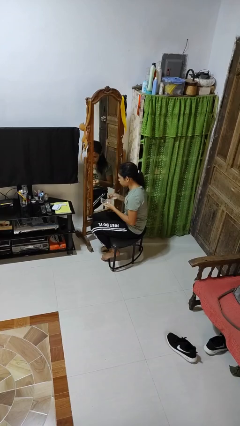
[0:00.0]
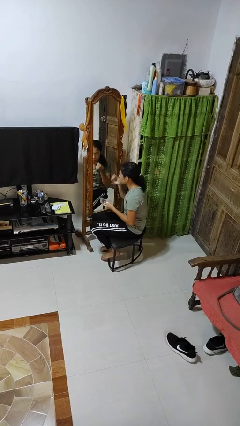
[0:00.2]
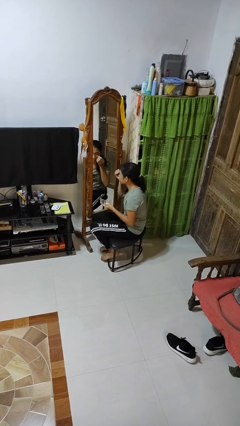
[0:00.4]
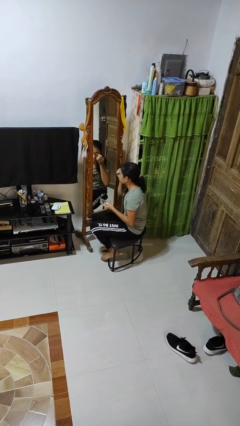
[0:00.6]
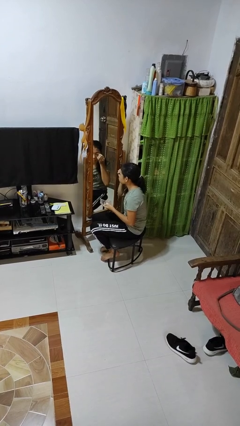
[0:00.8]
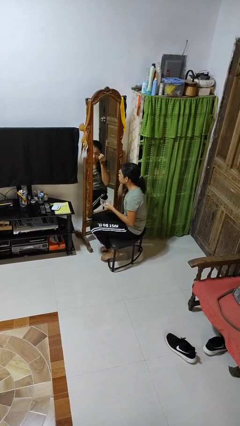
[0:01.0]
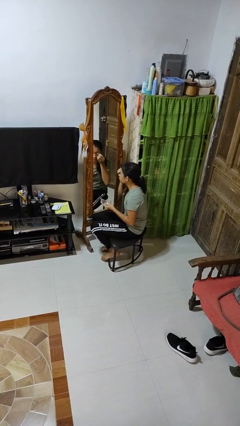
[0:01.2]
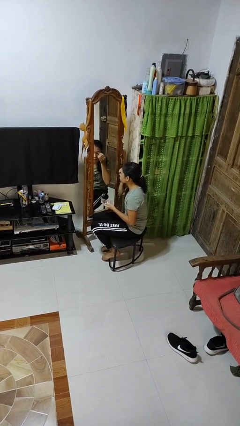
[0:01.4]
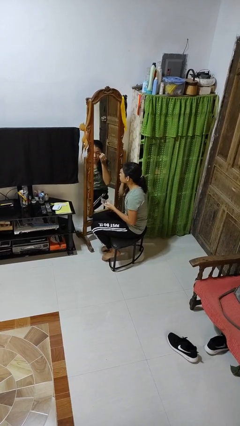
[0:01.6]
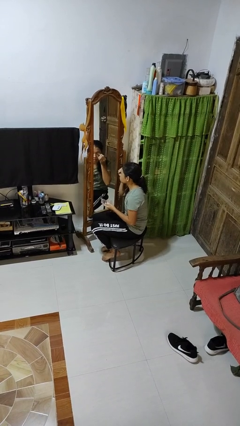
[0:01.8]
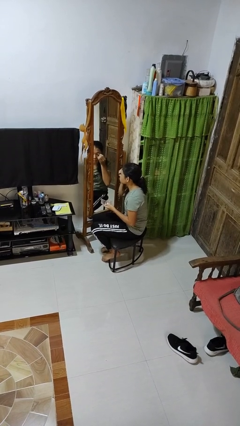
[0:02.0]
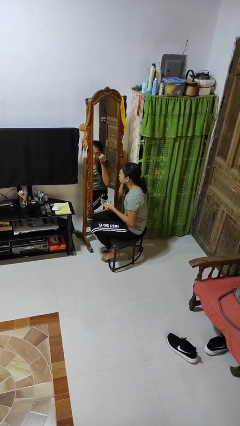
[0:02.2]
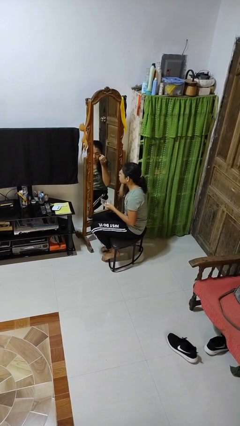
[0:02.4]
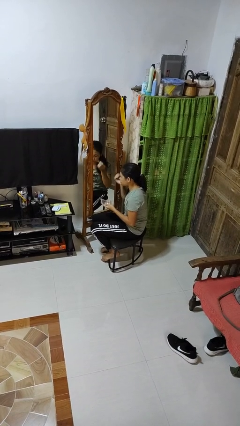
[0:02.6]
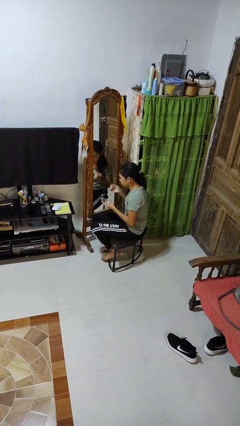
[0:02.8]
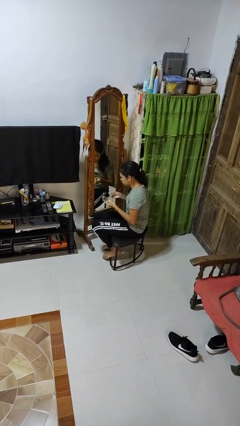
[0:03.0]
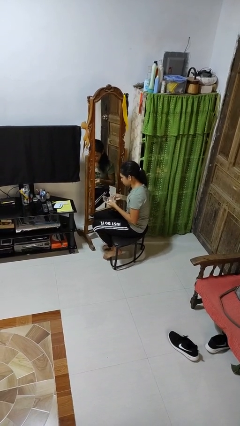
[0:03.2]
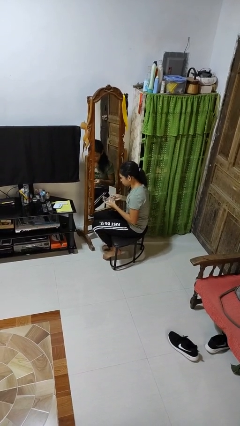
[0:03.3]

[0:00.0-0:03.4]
person applies eye makeup

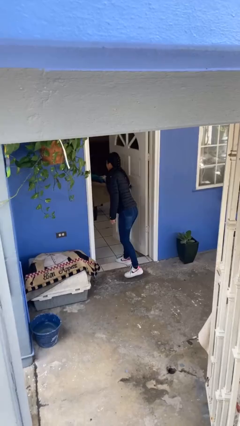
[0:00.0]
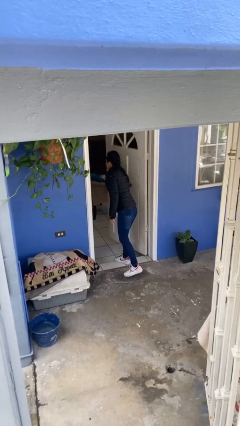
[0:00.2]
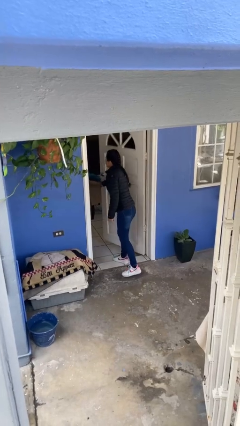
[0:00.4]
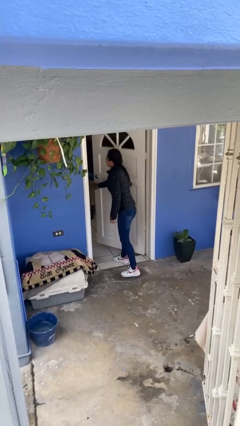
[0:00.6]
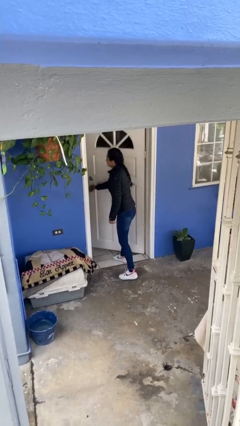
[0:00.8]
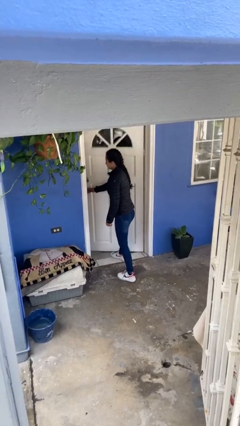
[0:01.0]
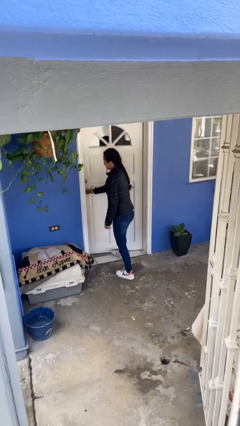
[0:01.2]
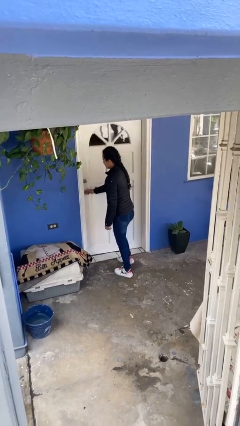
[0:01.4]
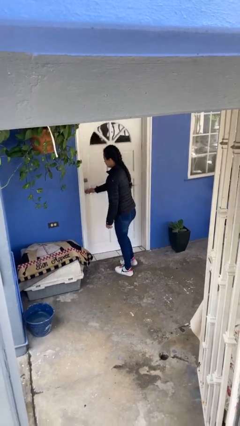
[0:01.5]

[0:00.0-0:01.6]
person closes facility door

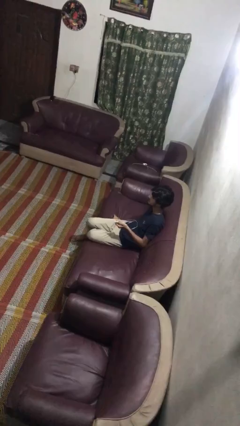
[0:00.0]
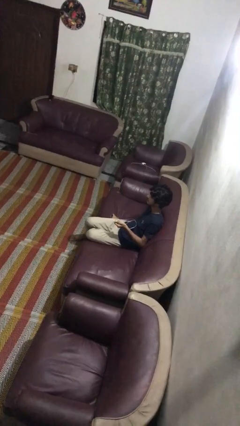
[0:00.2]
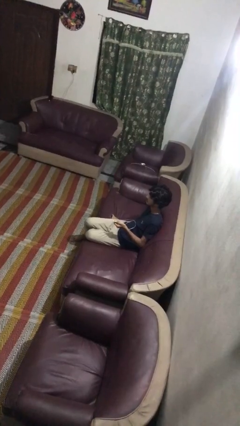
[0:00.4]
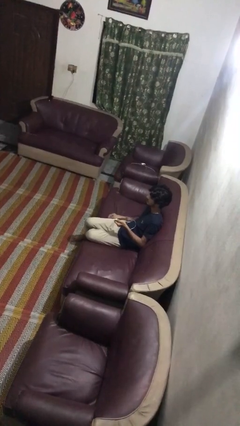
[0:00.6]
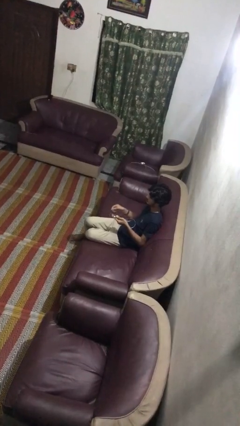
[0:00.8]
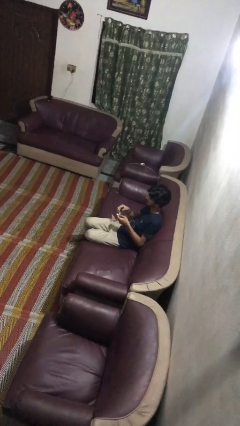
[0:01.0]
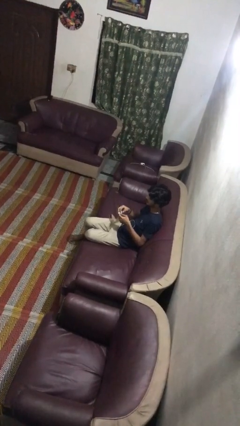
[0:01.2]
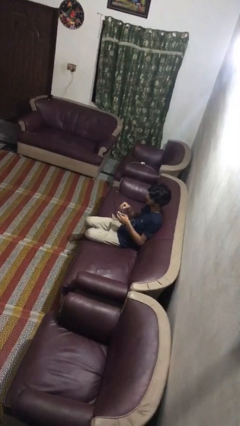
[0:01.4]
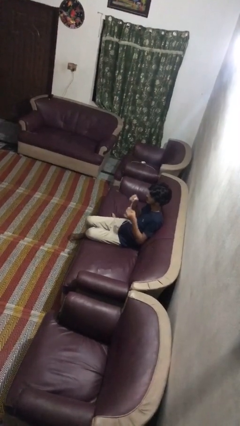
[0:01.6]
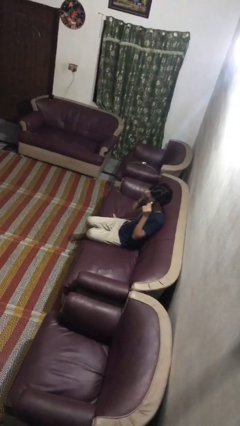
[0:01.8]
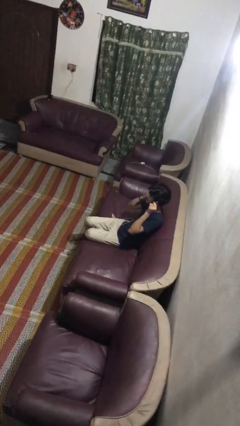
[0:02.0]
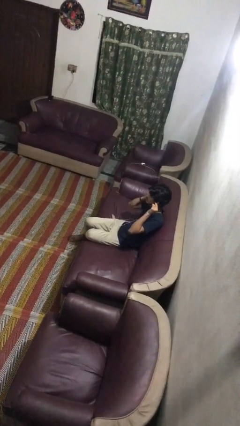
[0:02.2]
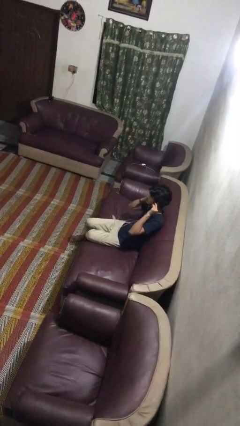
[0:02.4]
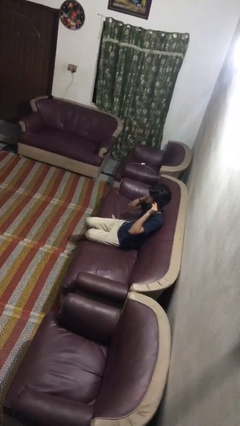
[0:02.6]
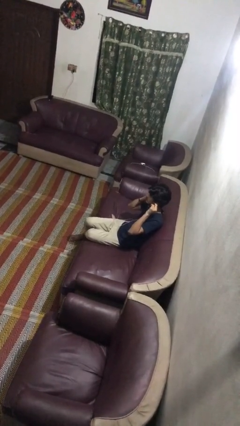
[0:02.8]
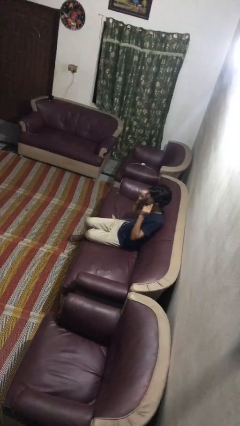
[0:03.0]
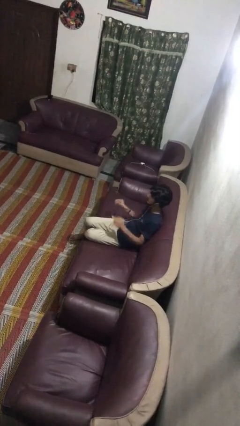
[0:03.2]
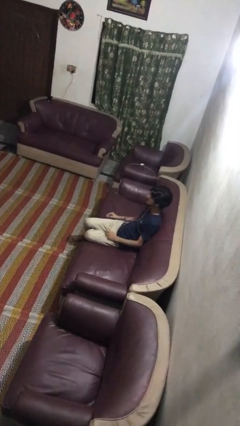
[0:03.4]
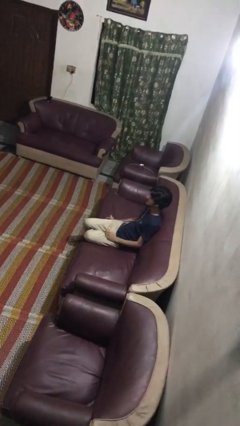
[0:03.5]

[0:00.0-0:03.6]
person puts on headphones

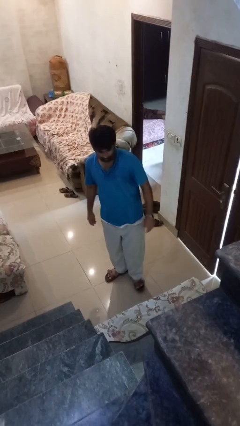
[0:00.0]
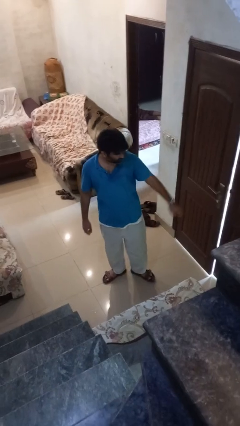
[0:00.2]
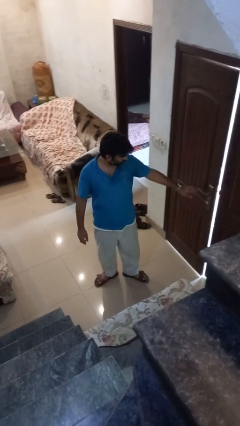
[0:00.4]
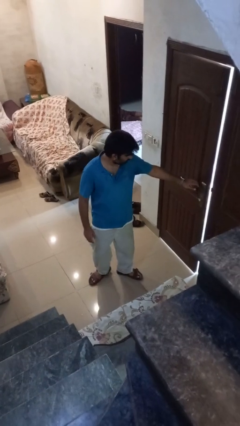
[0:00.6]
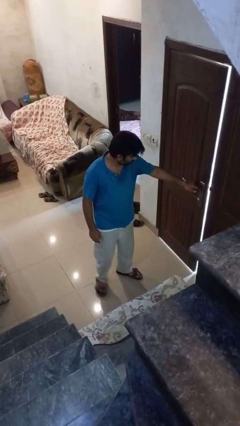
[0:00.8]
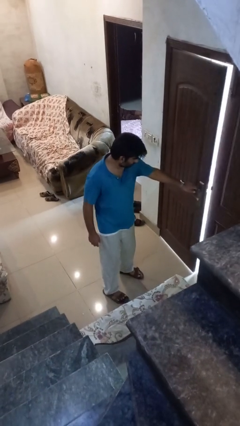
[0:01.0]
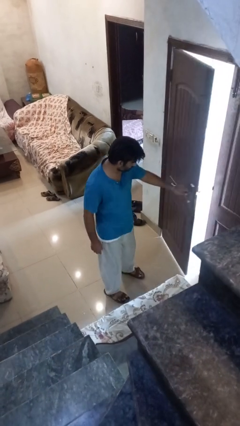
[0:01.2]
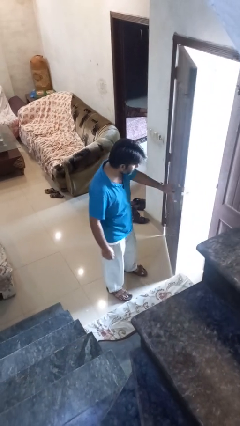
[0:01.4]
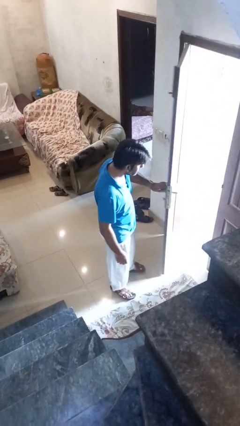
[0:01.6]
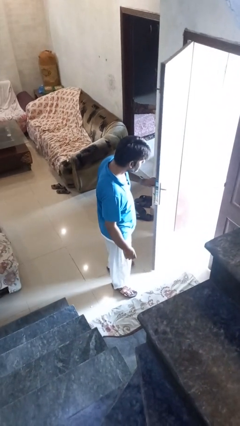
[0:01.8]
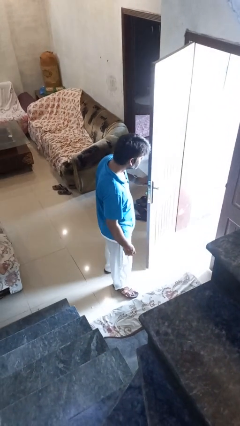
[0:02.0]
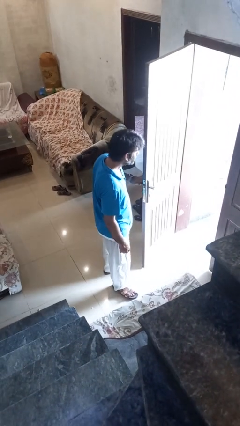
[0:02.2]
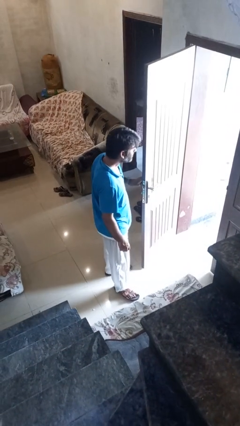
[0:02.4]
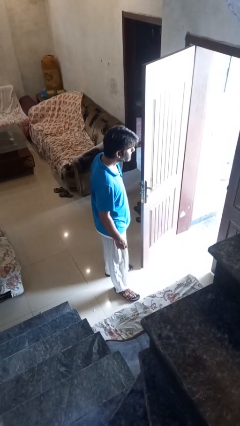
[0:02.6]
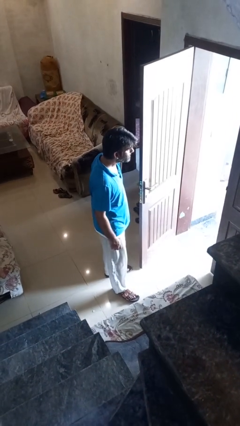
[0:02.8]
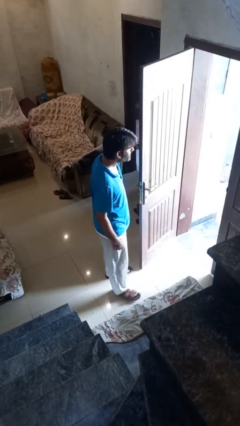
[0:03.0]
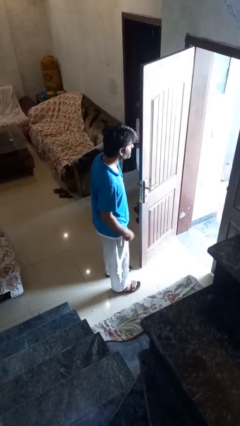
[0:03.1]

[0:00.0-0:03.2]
person opens facility door

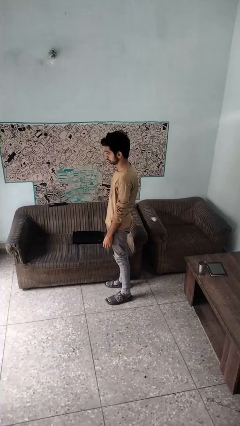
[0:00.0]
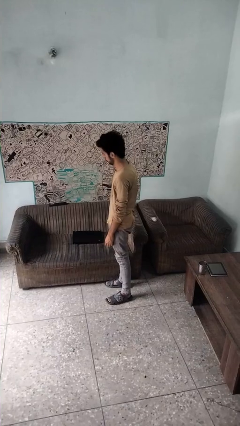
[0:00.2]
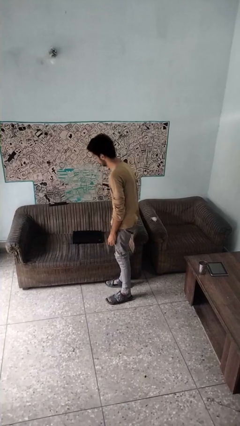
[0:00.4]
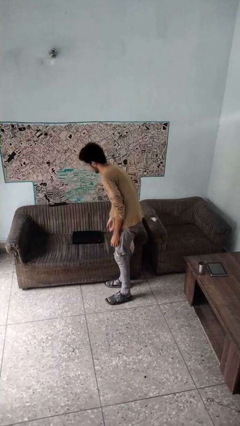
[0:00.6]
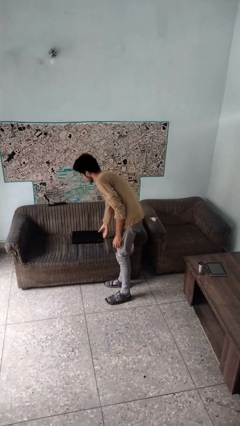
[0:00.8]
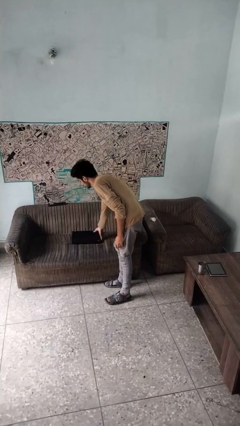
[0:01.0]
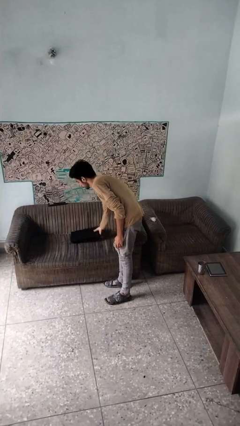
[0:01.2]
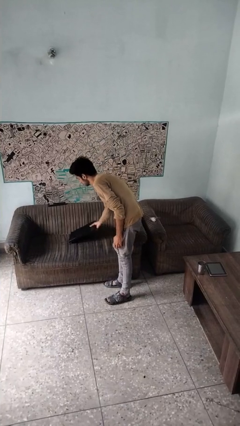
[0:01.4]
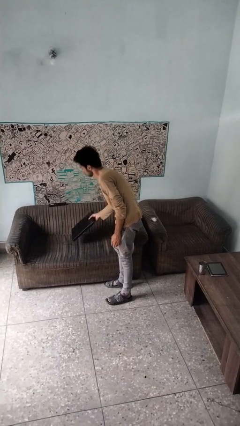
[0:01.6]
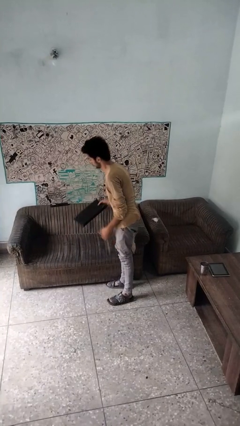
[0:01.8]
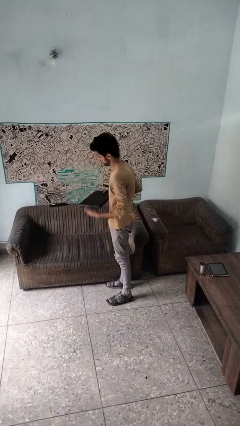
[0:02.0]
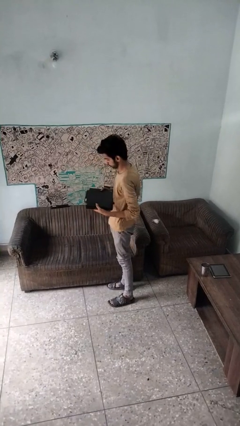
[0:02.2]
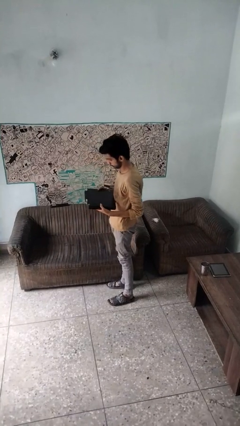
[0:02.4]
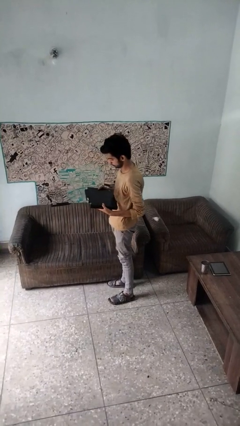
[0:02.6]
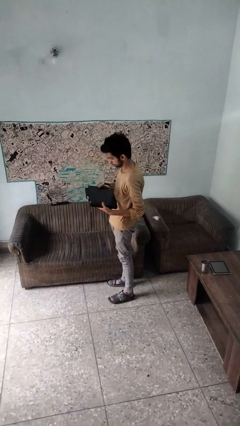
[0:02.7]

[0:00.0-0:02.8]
person picks up object from couch

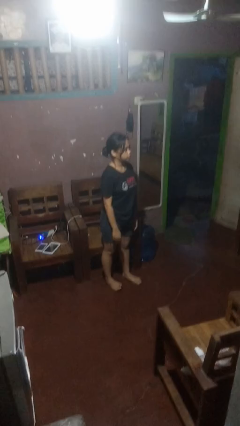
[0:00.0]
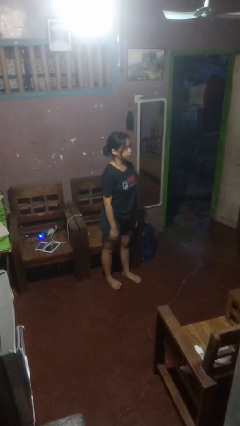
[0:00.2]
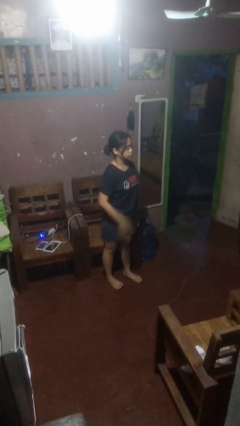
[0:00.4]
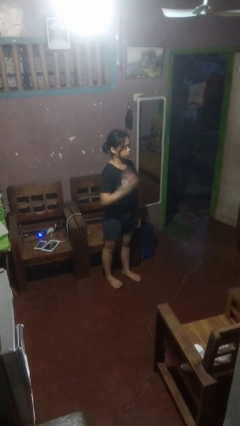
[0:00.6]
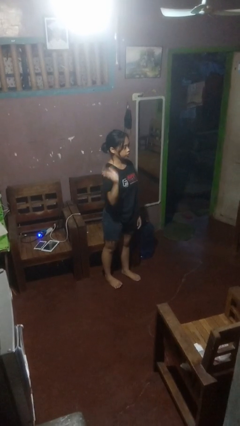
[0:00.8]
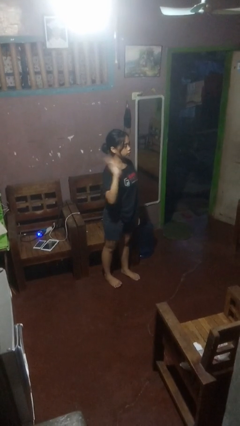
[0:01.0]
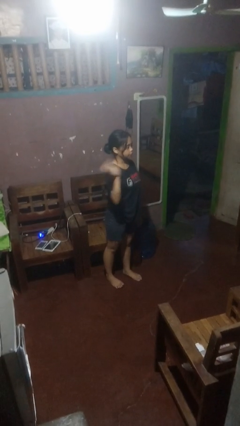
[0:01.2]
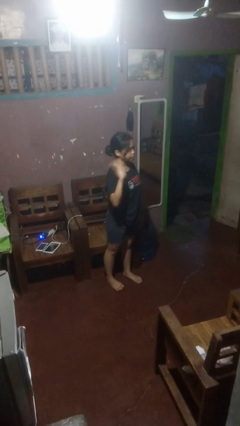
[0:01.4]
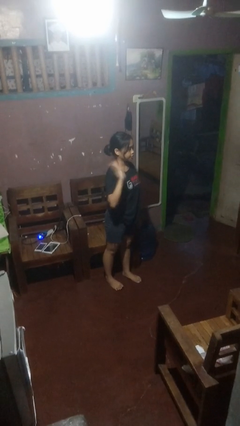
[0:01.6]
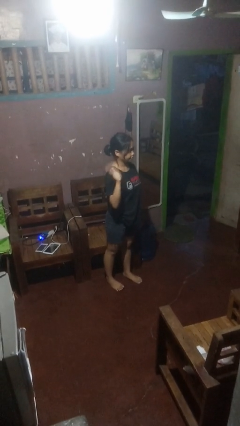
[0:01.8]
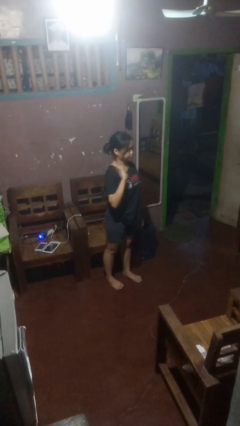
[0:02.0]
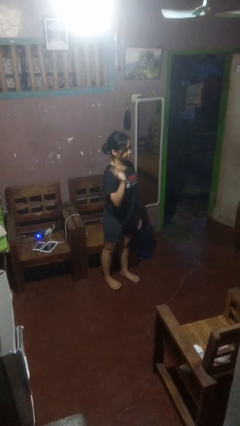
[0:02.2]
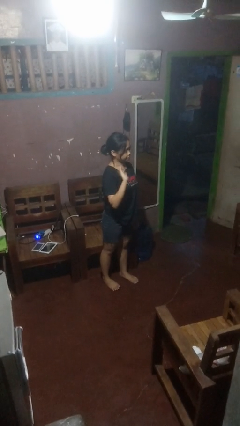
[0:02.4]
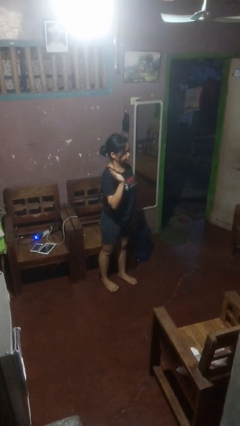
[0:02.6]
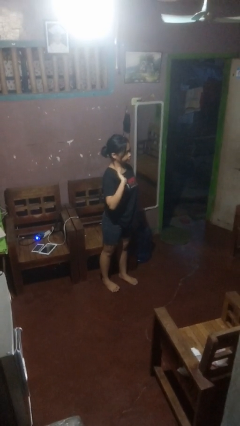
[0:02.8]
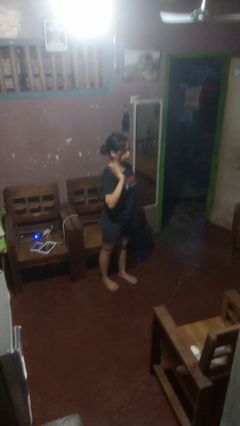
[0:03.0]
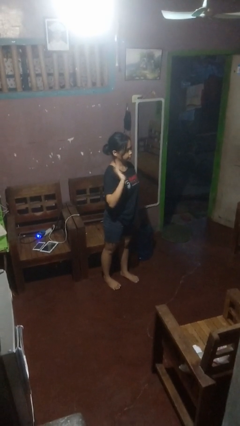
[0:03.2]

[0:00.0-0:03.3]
person waves at person
